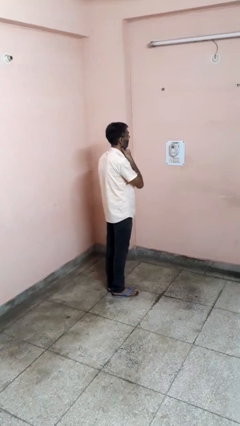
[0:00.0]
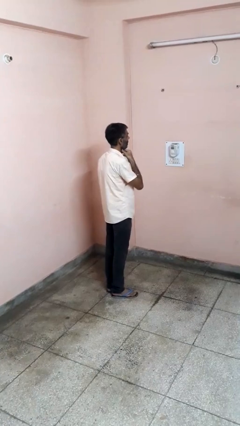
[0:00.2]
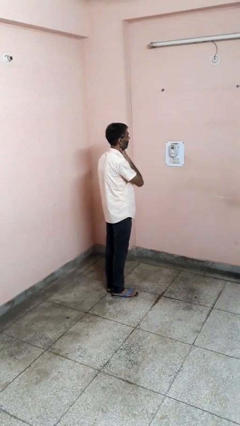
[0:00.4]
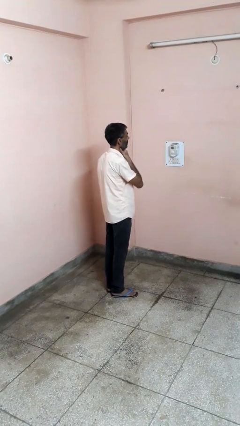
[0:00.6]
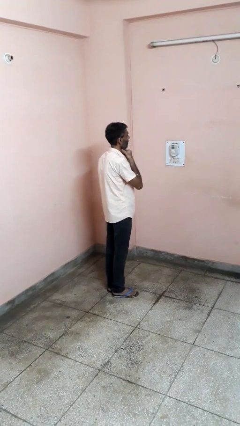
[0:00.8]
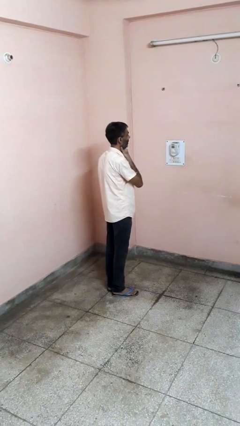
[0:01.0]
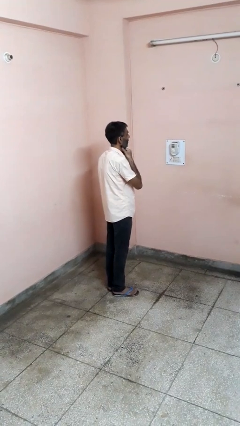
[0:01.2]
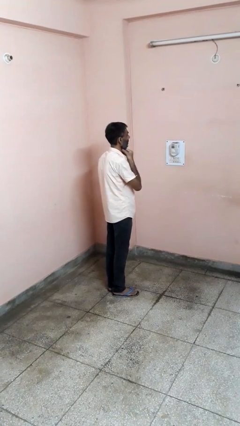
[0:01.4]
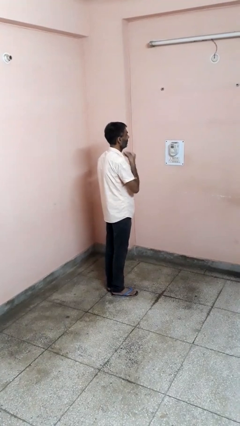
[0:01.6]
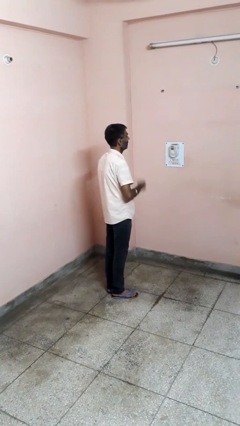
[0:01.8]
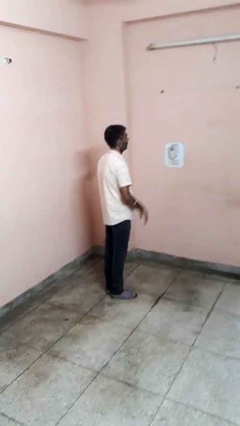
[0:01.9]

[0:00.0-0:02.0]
person rubs neck

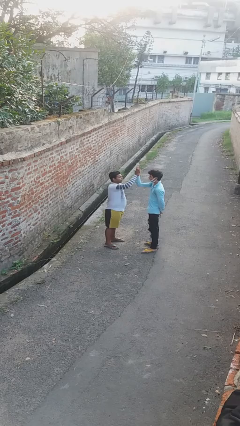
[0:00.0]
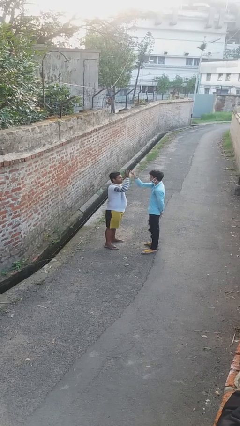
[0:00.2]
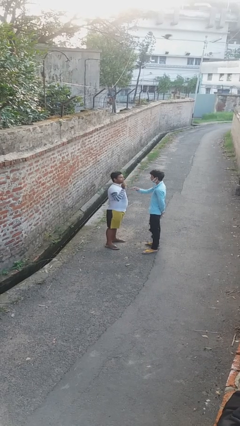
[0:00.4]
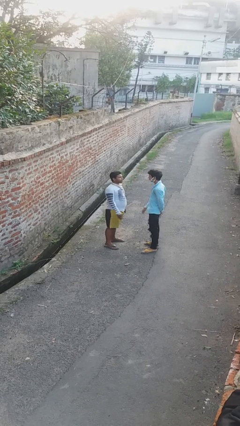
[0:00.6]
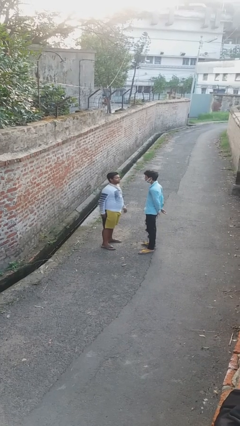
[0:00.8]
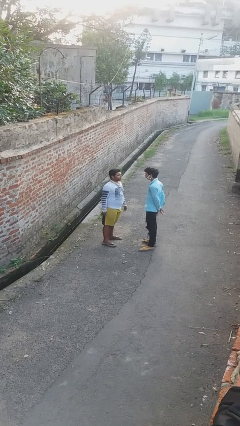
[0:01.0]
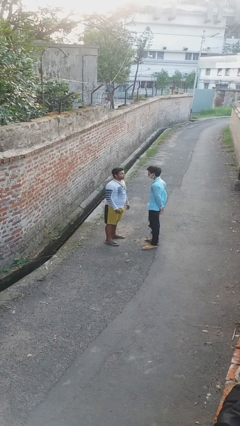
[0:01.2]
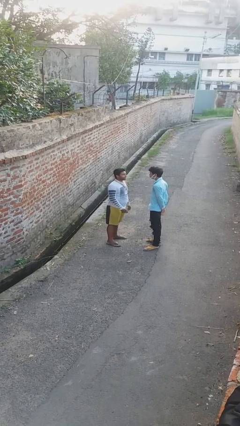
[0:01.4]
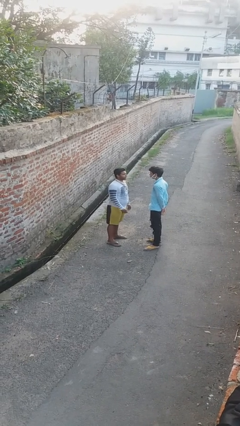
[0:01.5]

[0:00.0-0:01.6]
person highfives hand

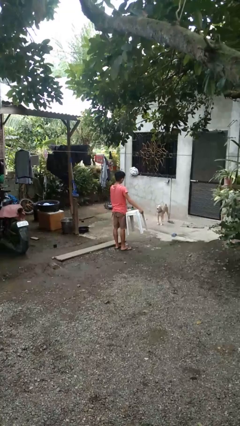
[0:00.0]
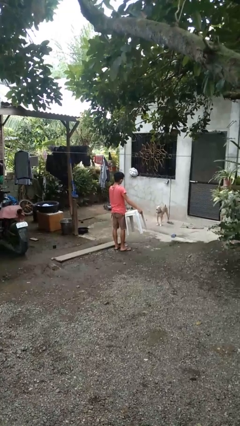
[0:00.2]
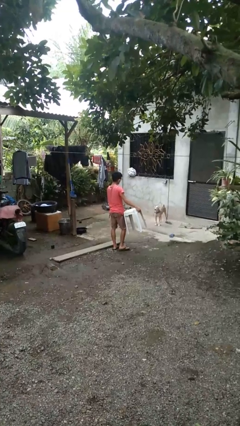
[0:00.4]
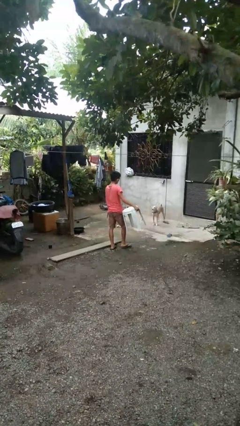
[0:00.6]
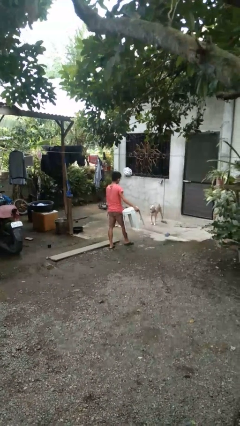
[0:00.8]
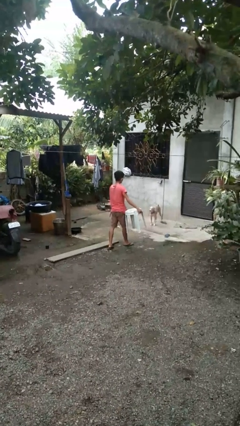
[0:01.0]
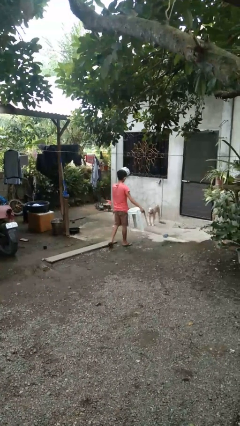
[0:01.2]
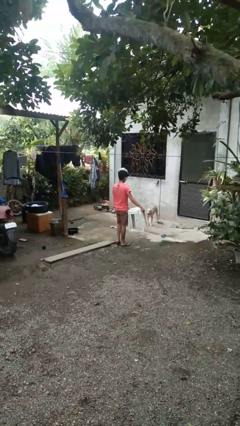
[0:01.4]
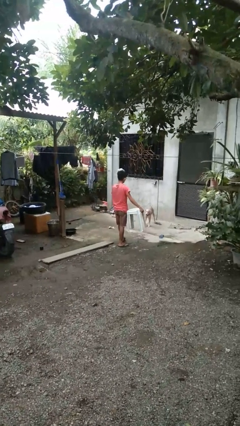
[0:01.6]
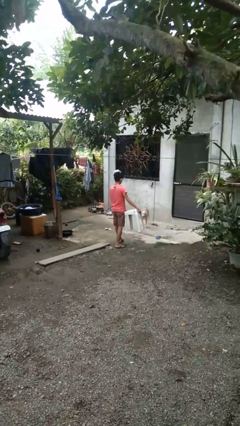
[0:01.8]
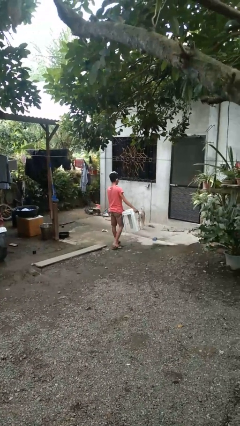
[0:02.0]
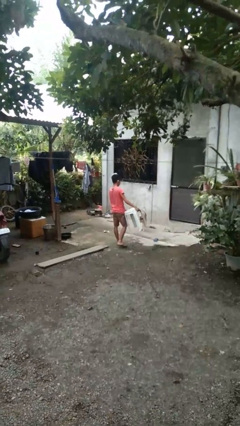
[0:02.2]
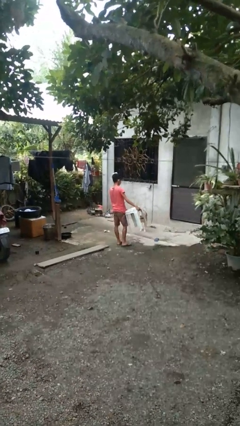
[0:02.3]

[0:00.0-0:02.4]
person carries furniture

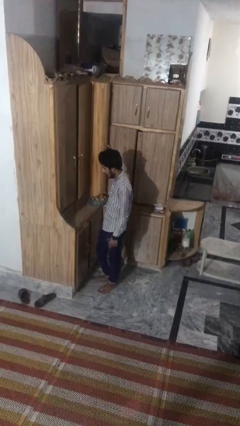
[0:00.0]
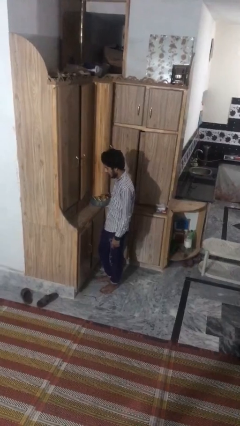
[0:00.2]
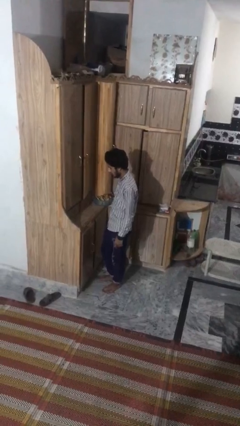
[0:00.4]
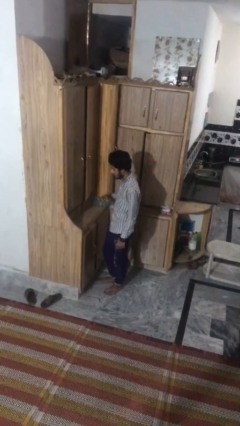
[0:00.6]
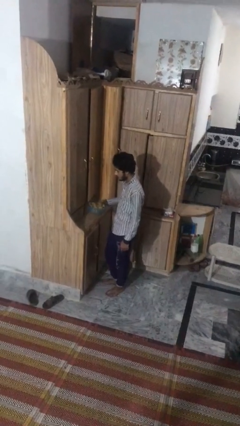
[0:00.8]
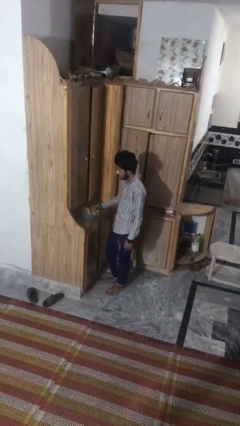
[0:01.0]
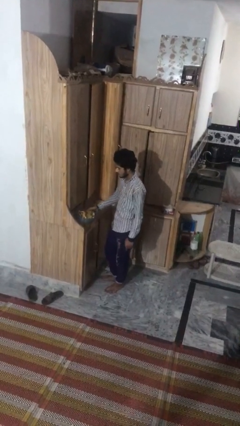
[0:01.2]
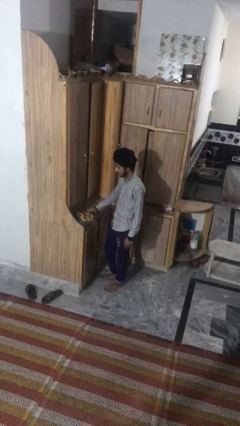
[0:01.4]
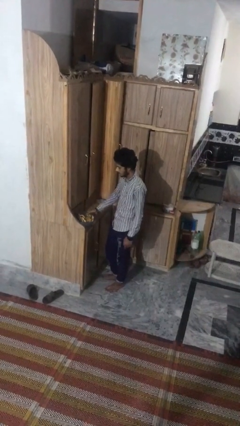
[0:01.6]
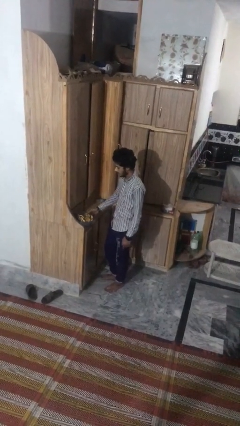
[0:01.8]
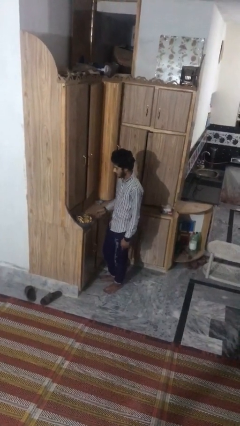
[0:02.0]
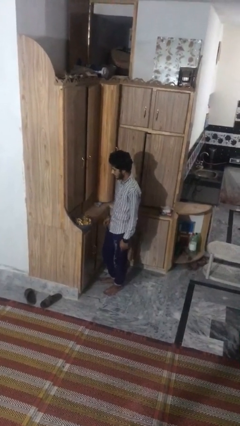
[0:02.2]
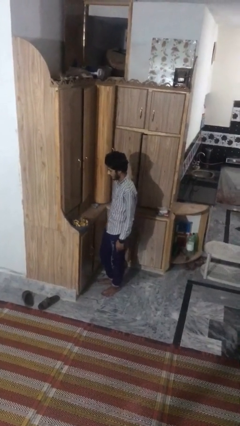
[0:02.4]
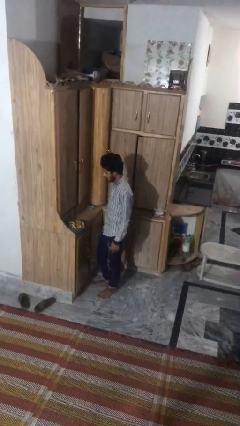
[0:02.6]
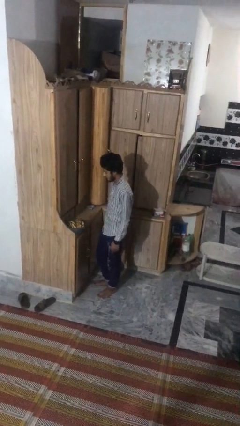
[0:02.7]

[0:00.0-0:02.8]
person puts down object on countertop

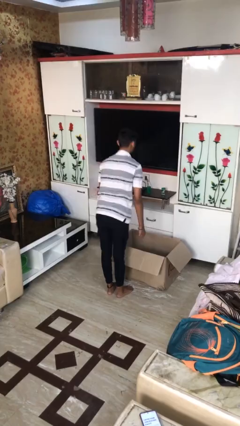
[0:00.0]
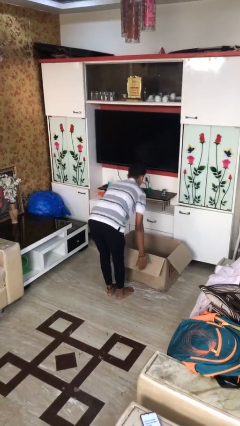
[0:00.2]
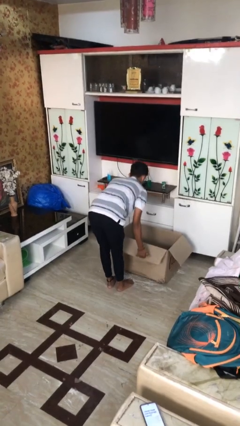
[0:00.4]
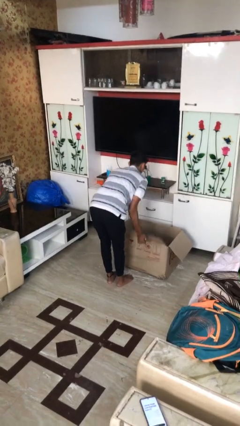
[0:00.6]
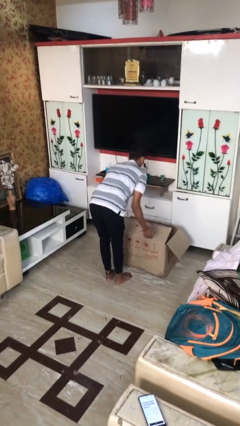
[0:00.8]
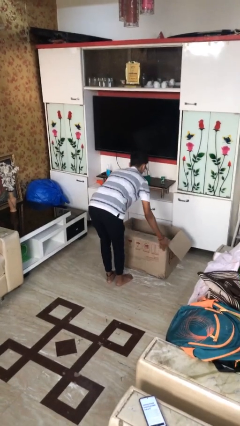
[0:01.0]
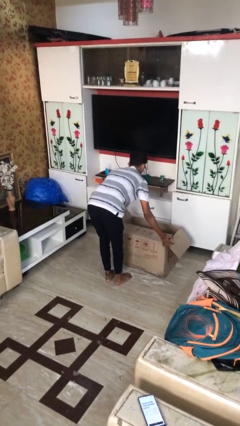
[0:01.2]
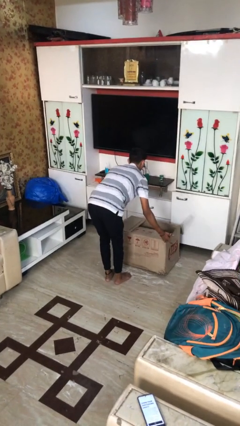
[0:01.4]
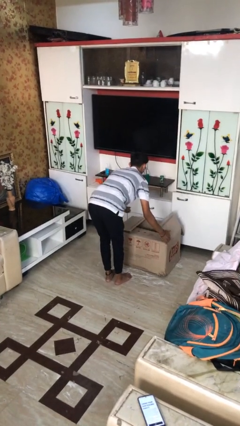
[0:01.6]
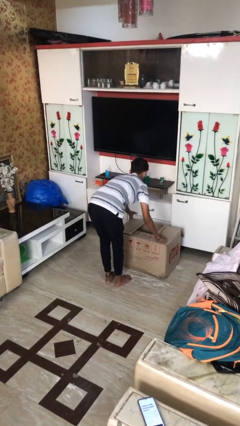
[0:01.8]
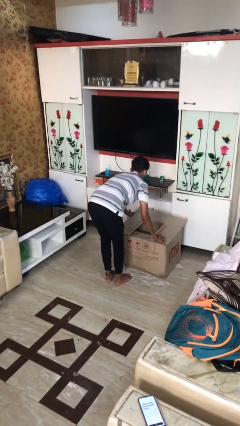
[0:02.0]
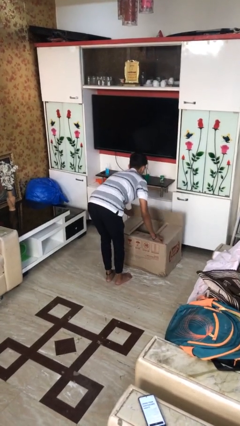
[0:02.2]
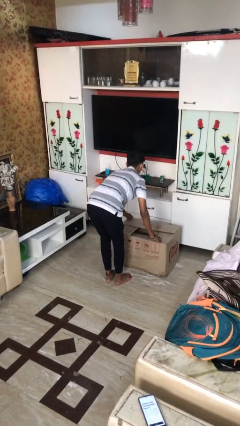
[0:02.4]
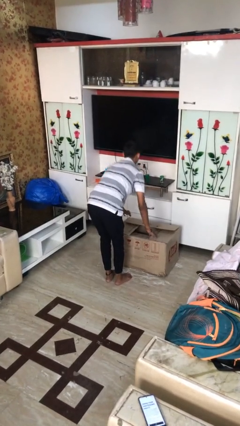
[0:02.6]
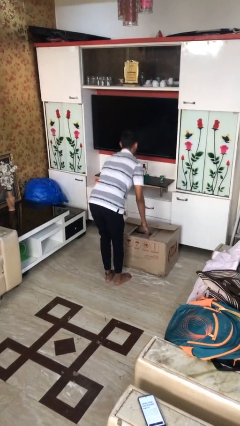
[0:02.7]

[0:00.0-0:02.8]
person closes box

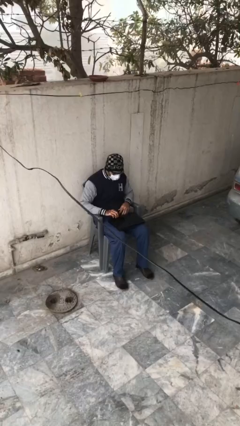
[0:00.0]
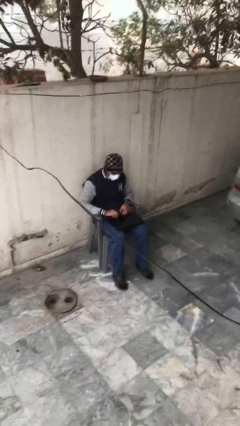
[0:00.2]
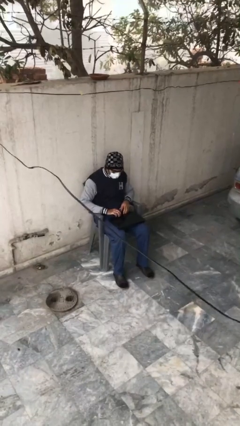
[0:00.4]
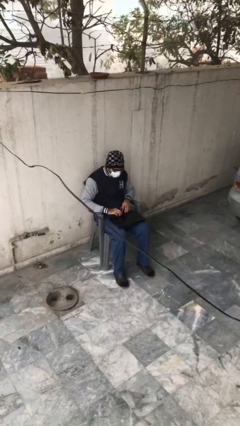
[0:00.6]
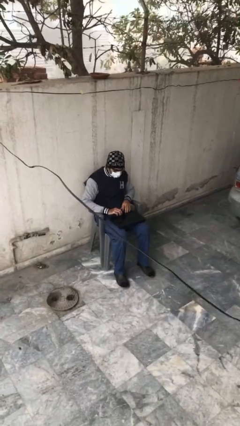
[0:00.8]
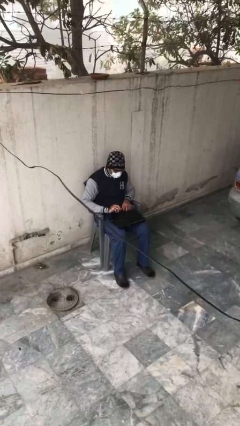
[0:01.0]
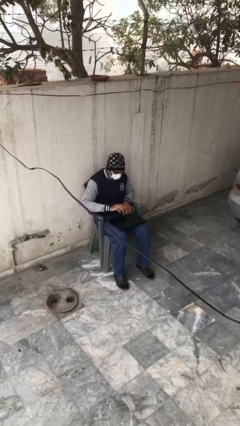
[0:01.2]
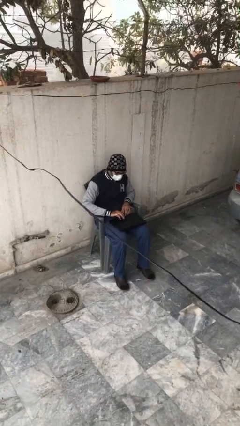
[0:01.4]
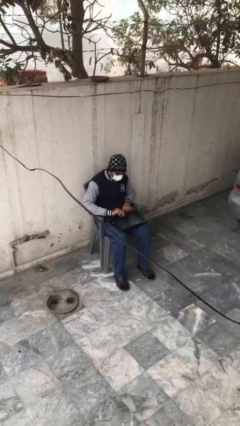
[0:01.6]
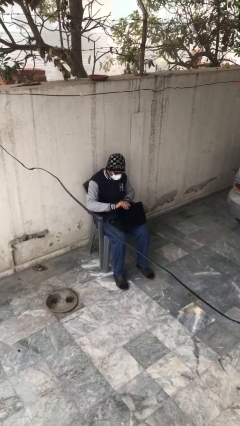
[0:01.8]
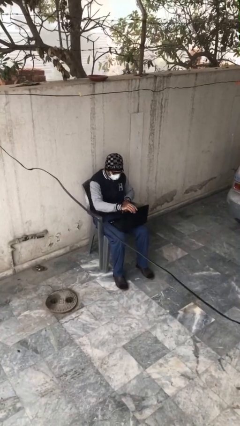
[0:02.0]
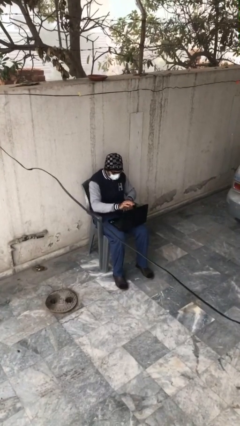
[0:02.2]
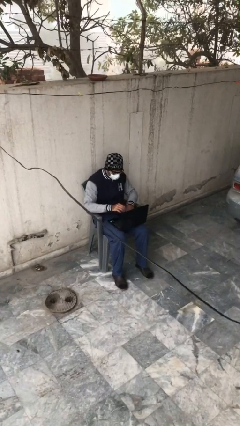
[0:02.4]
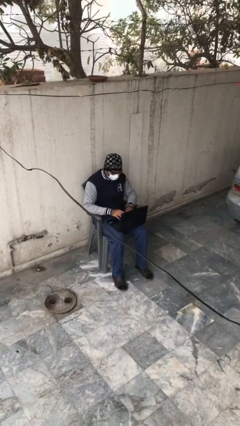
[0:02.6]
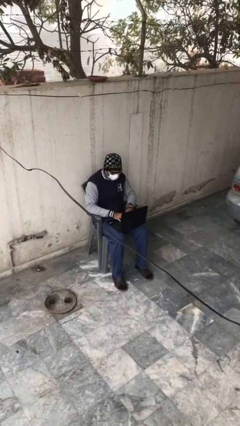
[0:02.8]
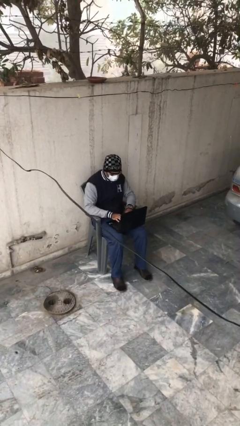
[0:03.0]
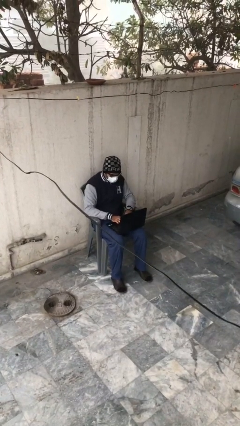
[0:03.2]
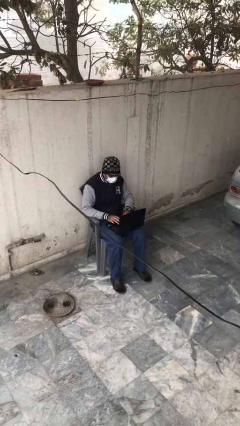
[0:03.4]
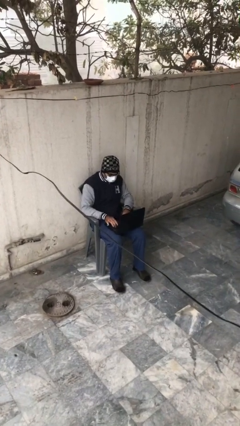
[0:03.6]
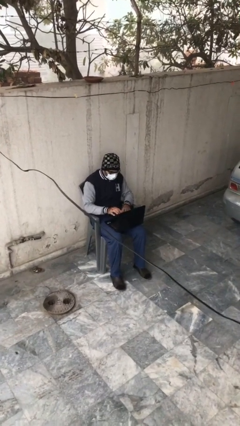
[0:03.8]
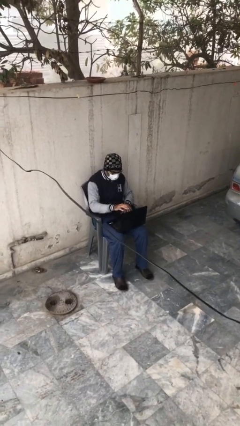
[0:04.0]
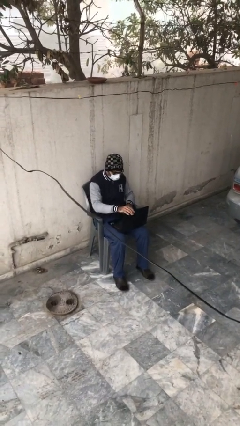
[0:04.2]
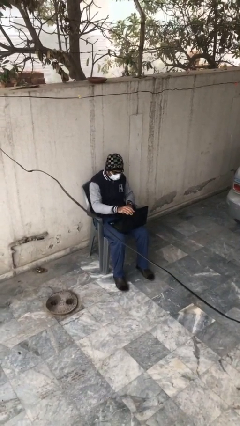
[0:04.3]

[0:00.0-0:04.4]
person interacts with laptop

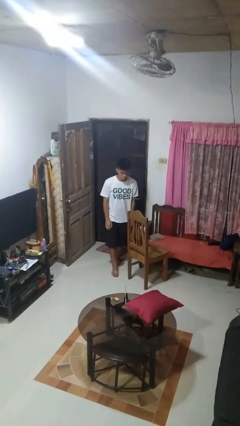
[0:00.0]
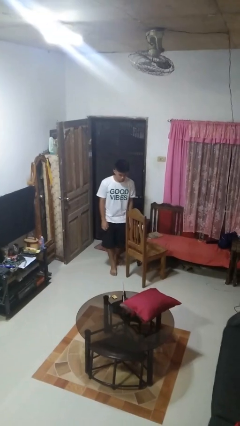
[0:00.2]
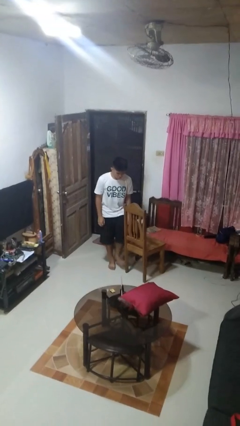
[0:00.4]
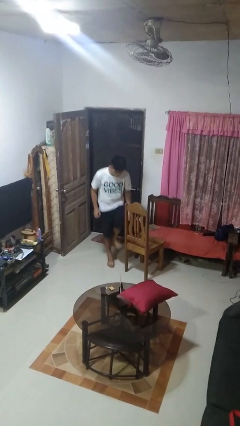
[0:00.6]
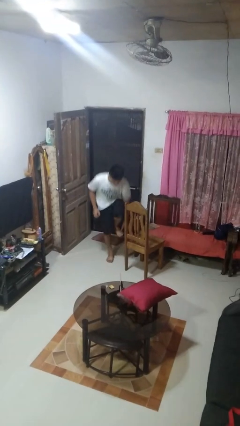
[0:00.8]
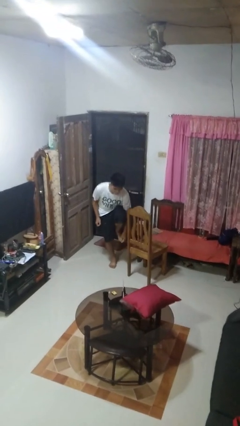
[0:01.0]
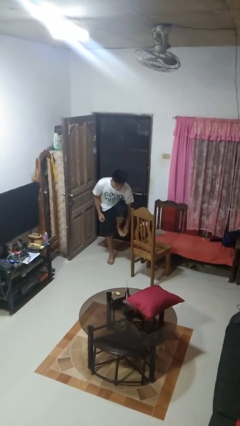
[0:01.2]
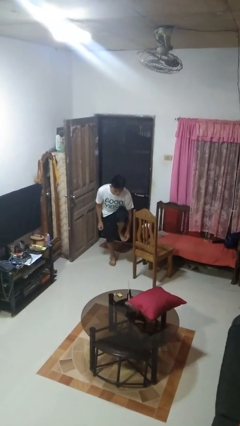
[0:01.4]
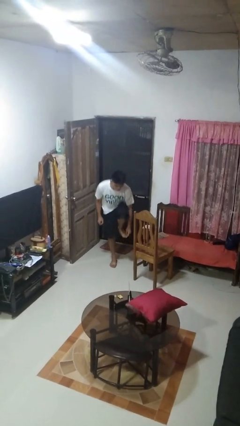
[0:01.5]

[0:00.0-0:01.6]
person stubs toe
